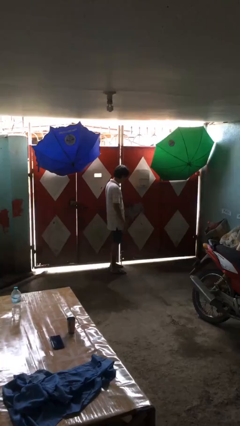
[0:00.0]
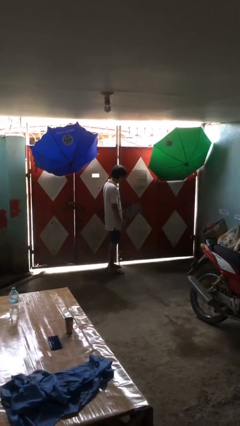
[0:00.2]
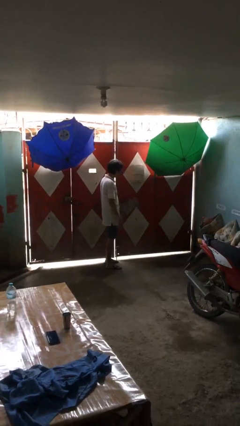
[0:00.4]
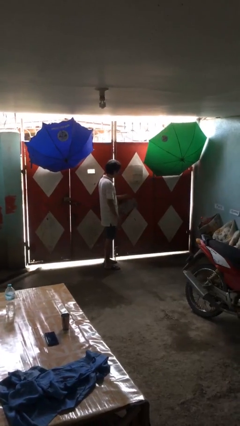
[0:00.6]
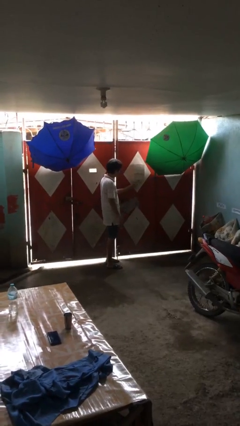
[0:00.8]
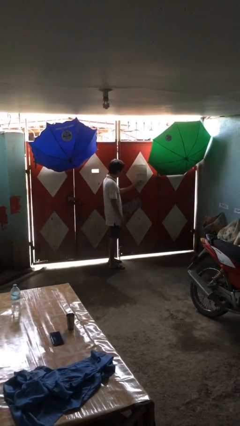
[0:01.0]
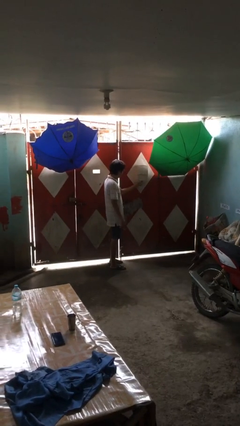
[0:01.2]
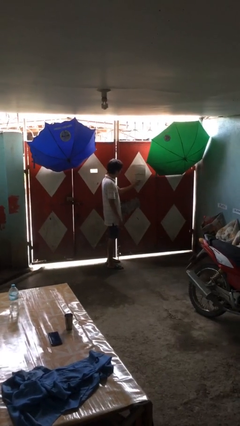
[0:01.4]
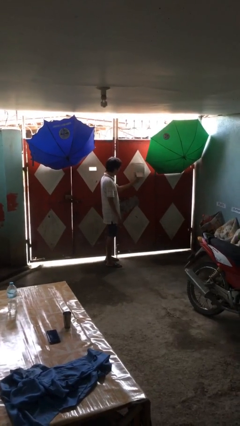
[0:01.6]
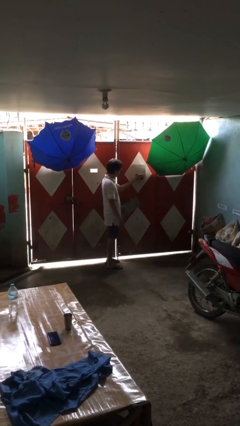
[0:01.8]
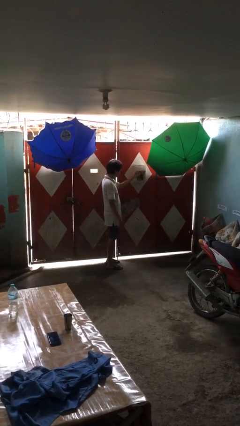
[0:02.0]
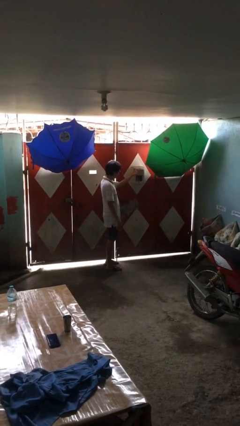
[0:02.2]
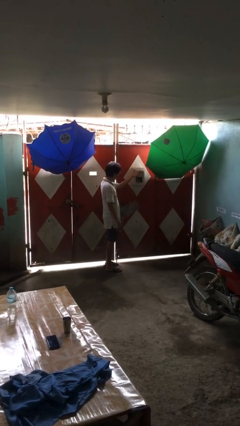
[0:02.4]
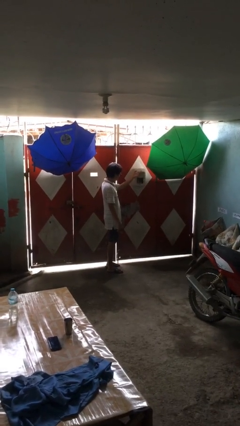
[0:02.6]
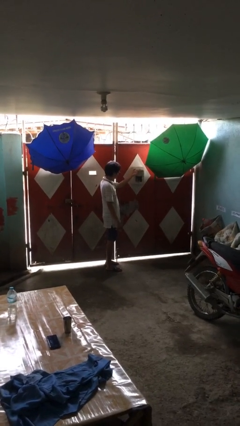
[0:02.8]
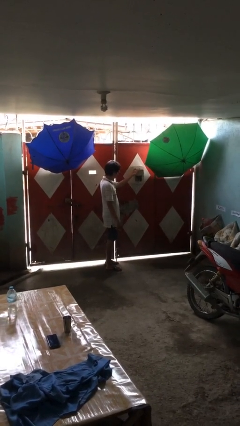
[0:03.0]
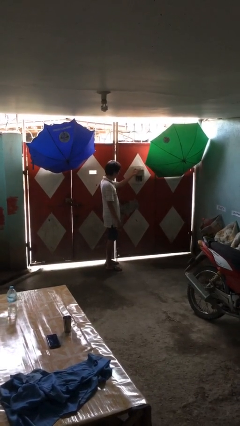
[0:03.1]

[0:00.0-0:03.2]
person opens mailbox

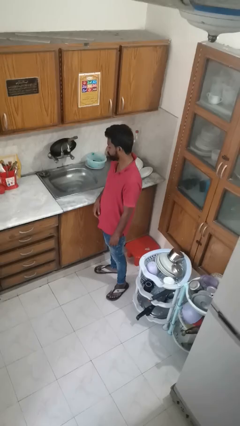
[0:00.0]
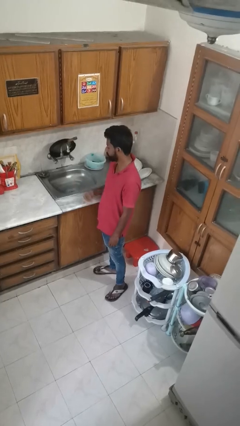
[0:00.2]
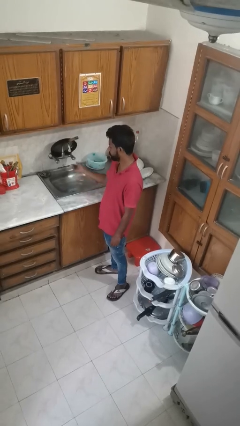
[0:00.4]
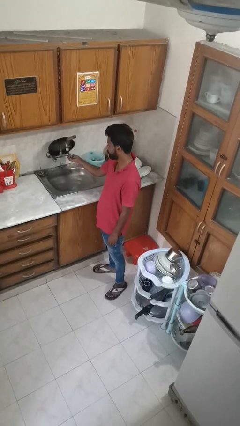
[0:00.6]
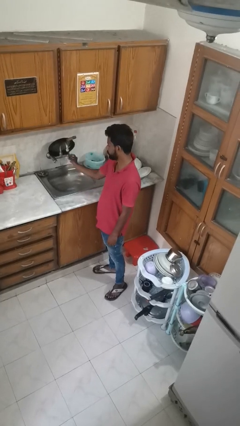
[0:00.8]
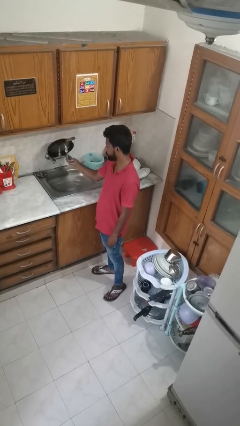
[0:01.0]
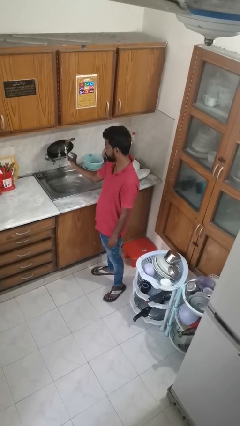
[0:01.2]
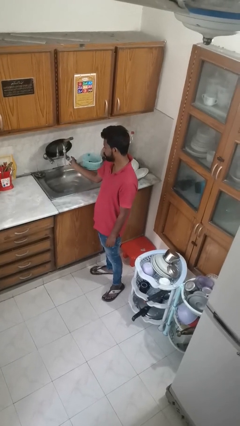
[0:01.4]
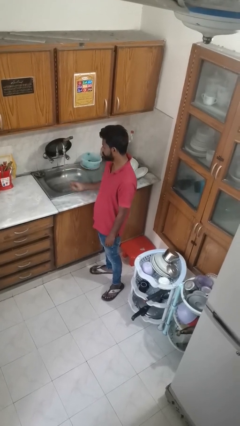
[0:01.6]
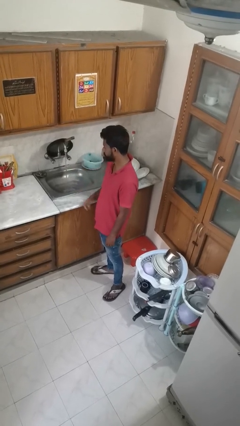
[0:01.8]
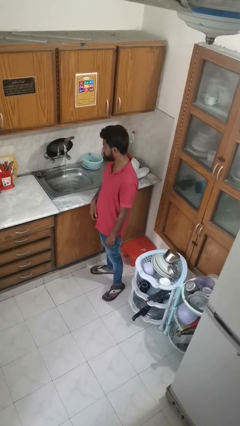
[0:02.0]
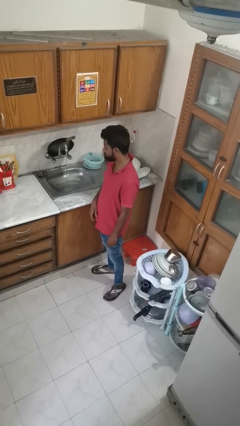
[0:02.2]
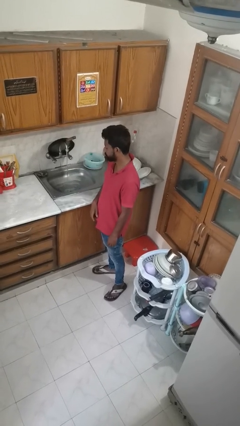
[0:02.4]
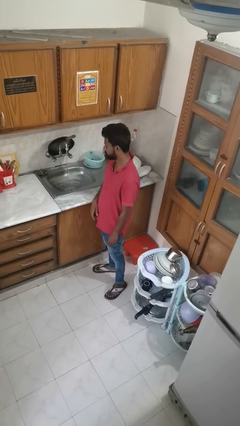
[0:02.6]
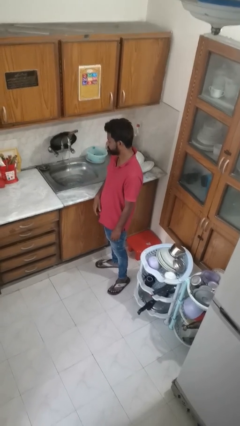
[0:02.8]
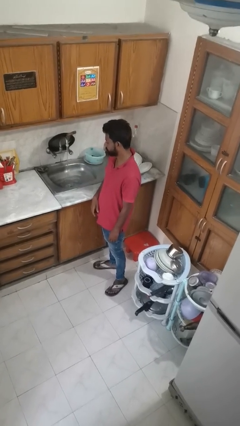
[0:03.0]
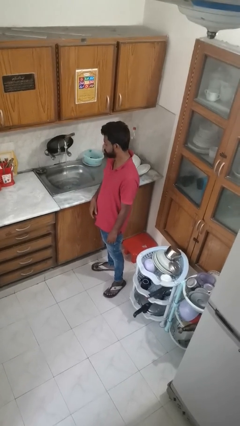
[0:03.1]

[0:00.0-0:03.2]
person turns on faucet

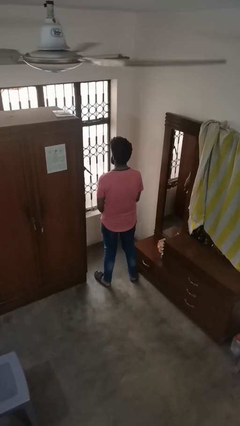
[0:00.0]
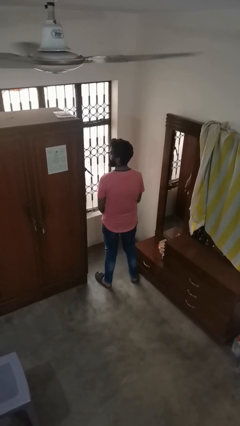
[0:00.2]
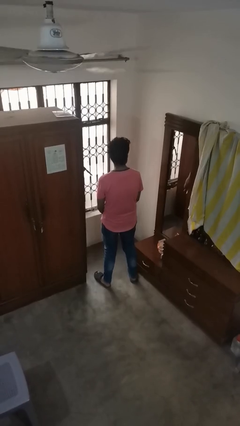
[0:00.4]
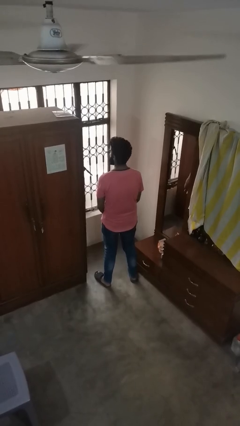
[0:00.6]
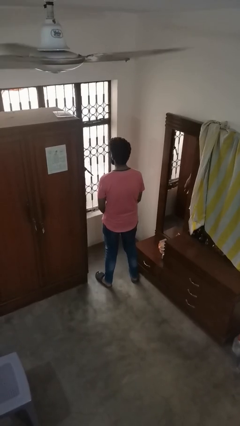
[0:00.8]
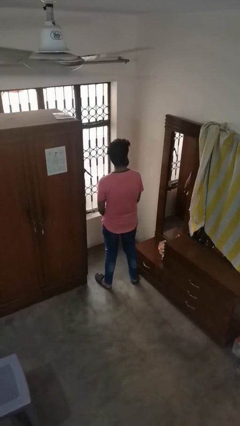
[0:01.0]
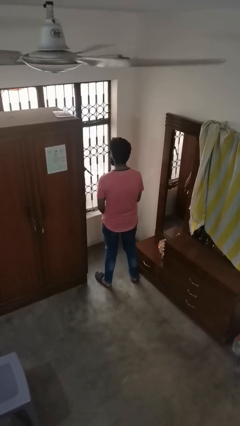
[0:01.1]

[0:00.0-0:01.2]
person shakes head

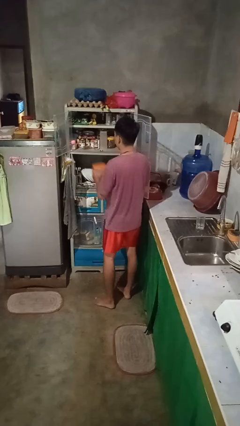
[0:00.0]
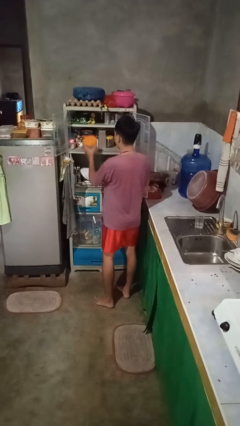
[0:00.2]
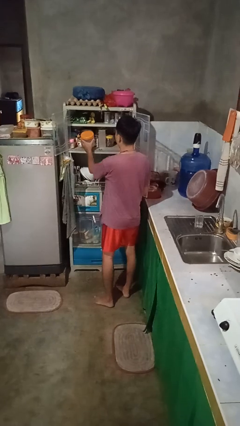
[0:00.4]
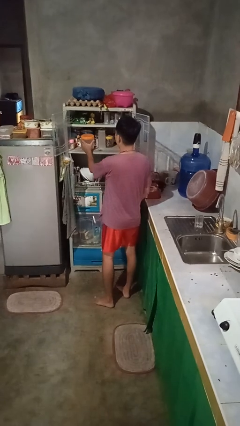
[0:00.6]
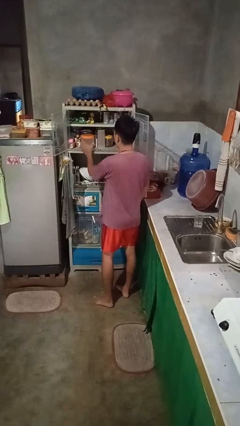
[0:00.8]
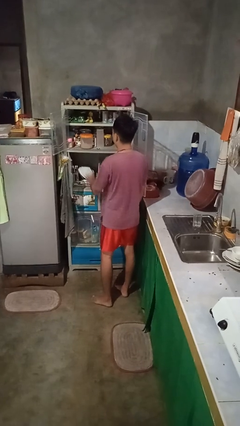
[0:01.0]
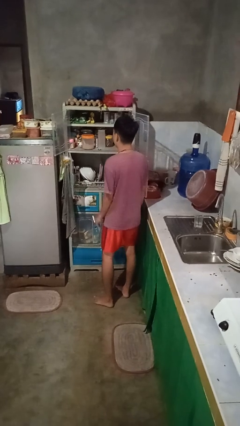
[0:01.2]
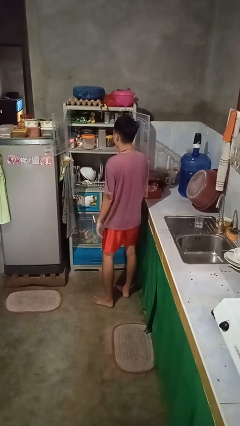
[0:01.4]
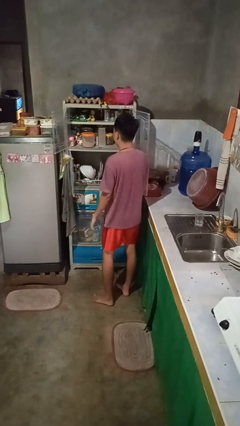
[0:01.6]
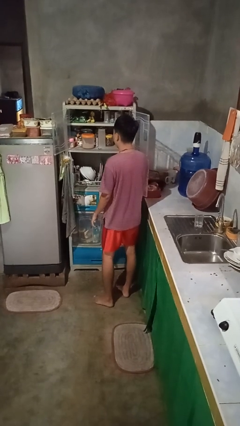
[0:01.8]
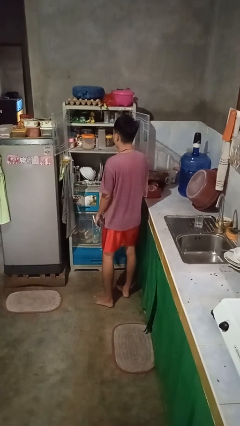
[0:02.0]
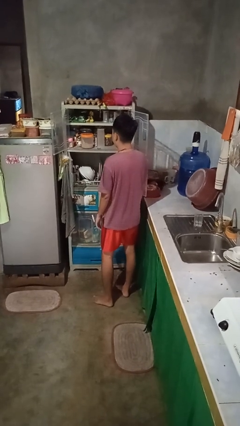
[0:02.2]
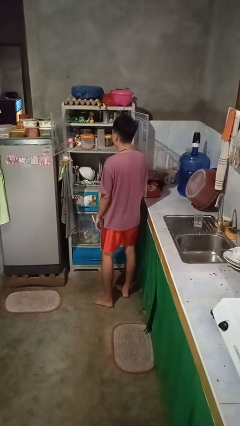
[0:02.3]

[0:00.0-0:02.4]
person puts object in cabinet

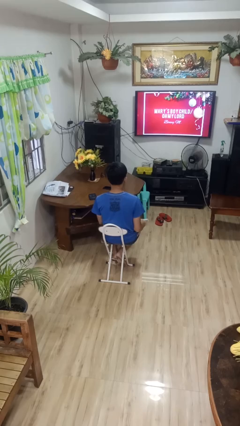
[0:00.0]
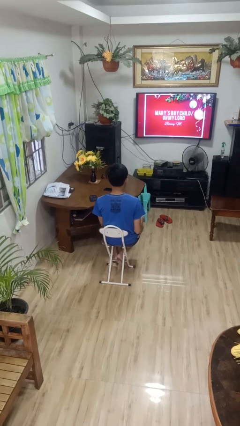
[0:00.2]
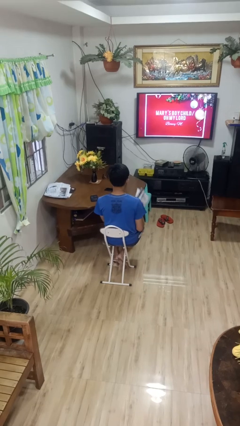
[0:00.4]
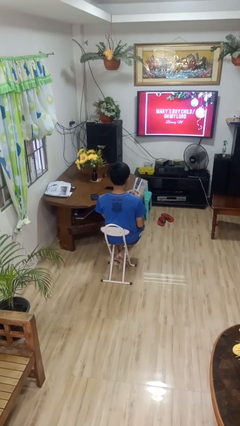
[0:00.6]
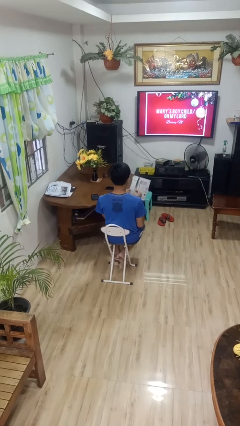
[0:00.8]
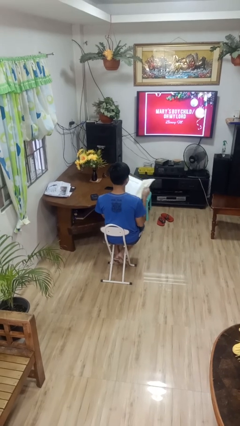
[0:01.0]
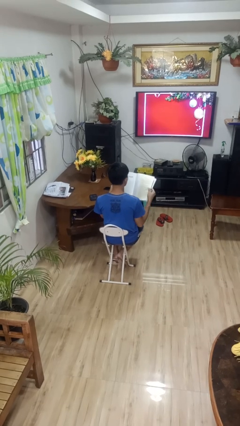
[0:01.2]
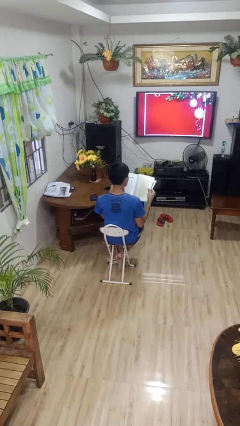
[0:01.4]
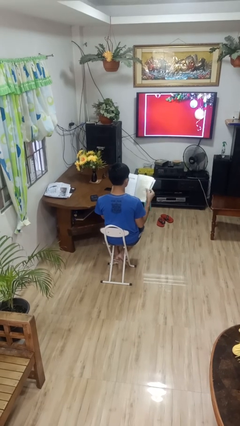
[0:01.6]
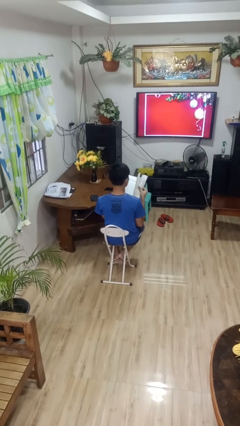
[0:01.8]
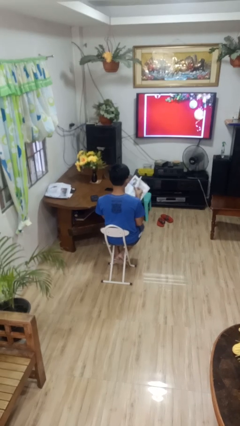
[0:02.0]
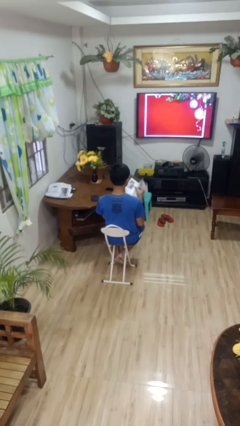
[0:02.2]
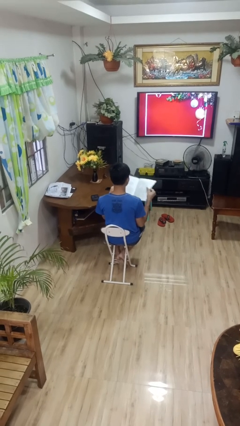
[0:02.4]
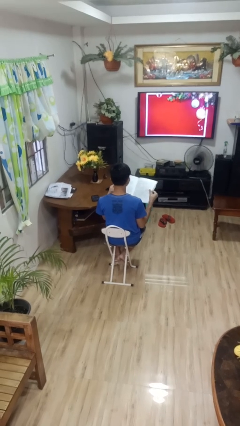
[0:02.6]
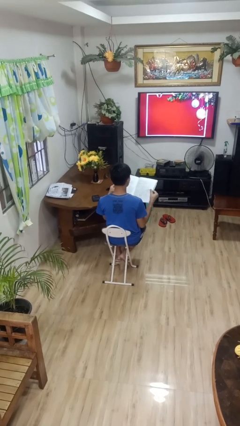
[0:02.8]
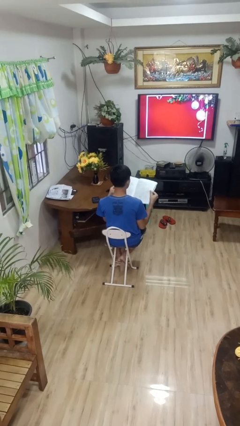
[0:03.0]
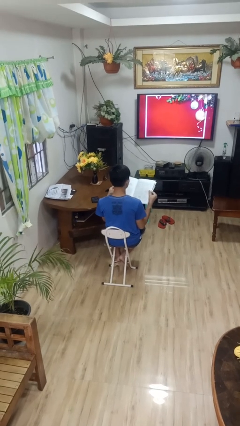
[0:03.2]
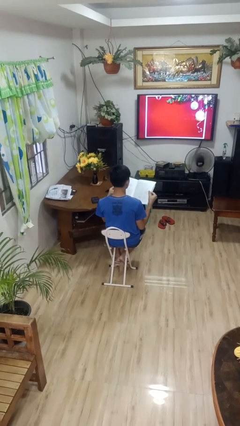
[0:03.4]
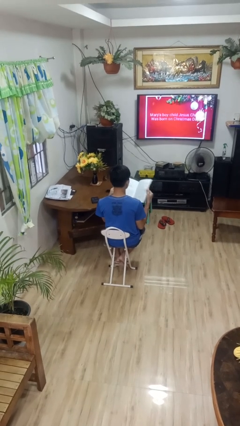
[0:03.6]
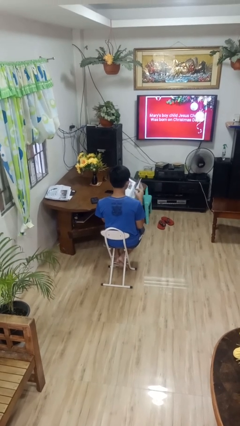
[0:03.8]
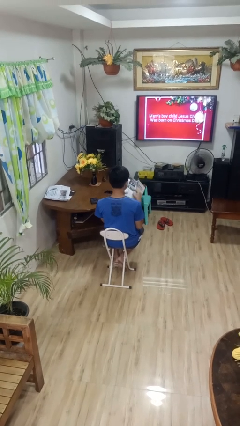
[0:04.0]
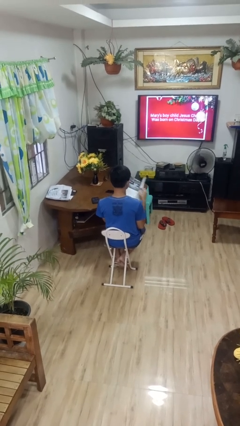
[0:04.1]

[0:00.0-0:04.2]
person reads magazine

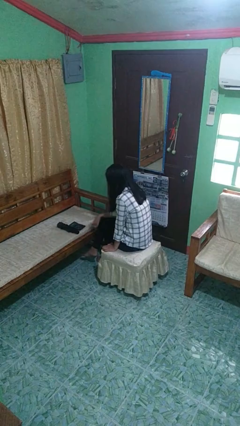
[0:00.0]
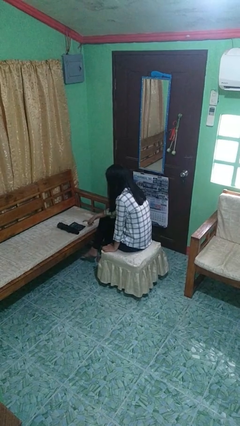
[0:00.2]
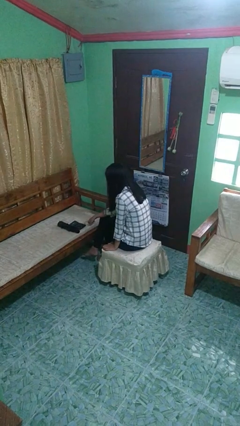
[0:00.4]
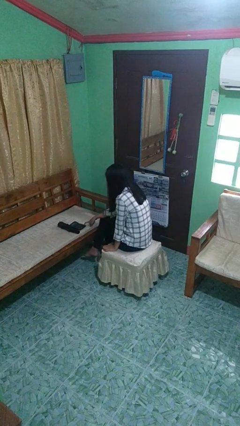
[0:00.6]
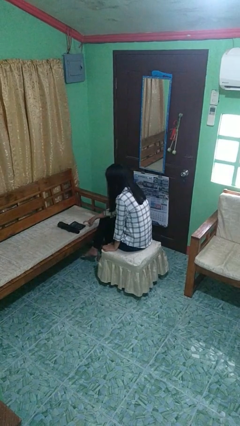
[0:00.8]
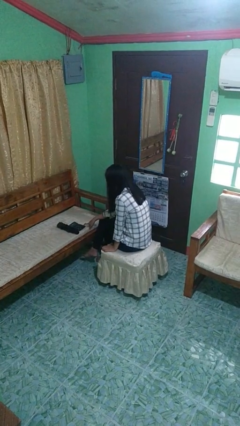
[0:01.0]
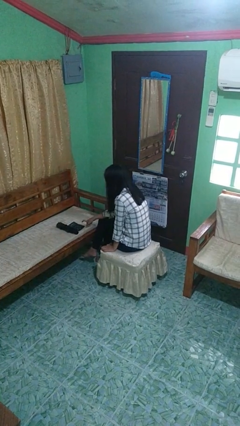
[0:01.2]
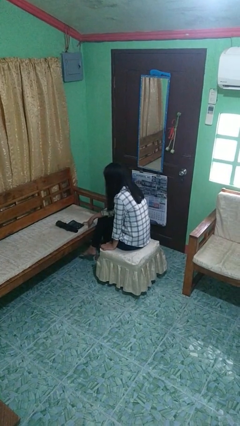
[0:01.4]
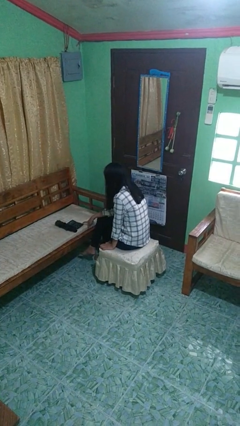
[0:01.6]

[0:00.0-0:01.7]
person taps object with finger

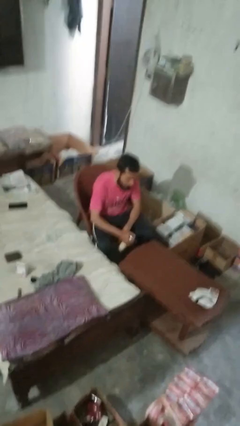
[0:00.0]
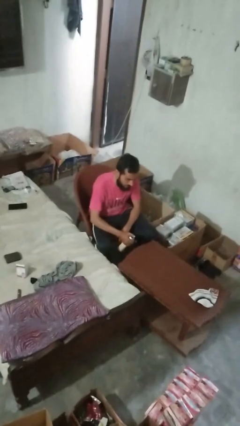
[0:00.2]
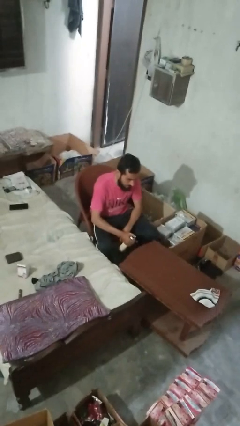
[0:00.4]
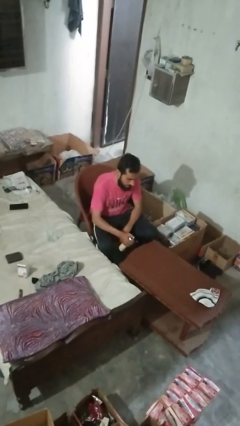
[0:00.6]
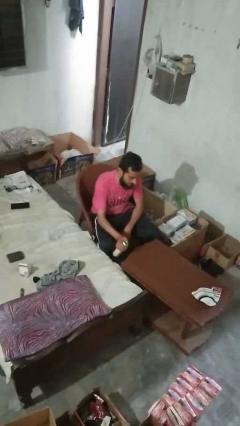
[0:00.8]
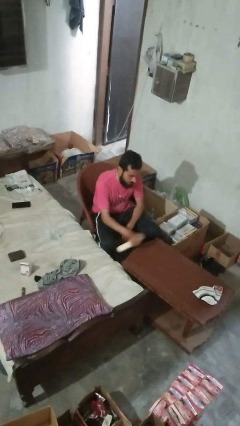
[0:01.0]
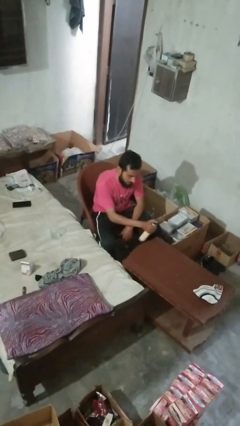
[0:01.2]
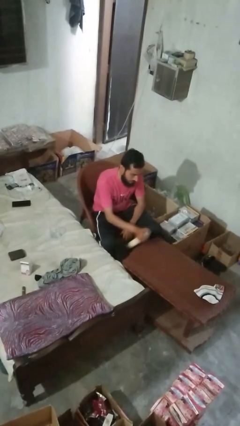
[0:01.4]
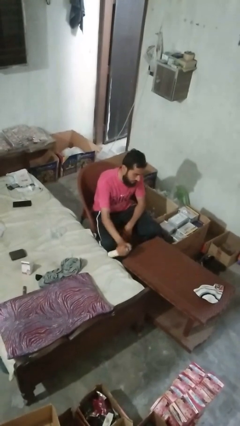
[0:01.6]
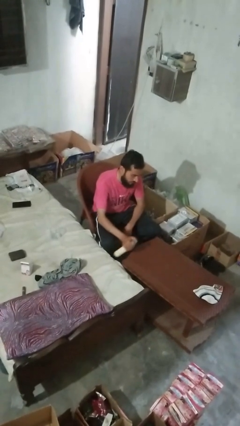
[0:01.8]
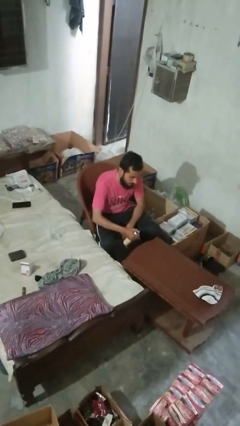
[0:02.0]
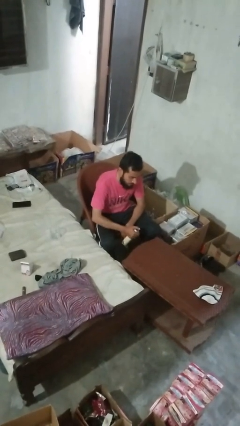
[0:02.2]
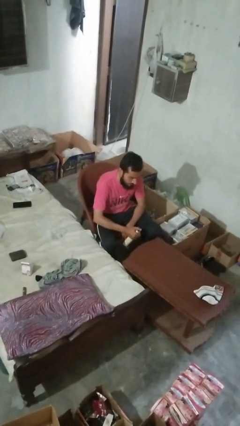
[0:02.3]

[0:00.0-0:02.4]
person sprays from bottle
